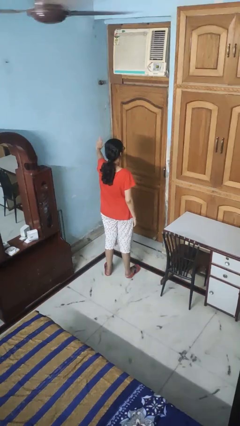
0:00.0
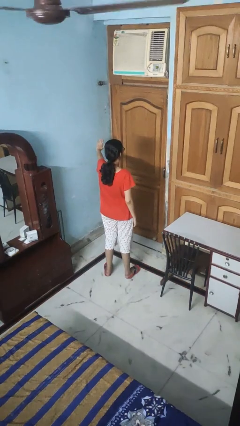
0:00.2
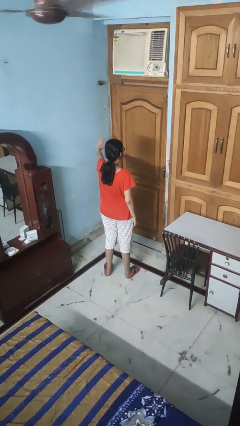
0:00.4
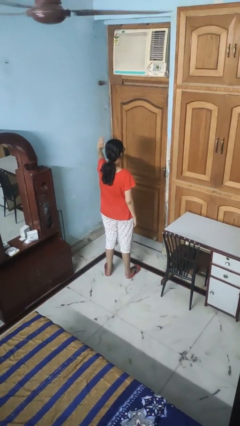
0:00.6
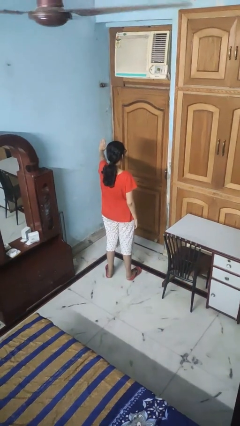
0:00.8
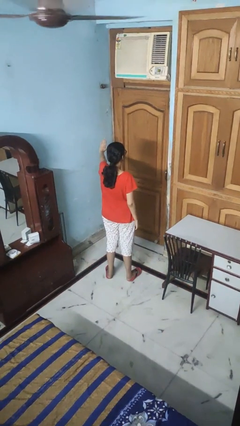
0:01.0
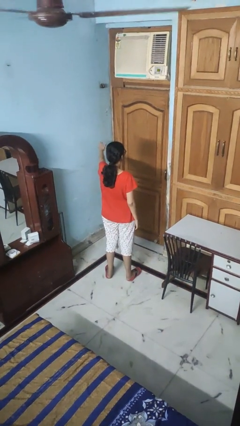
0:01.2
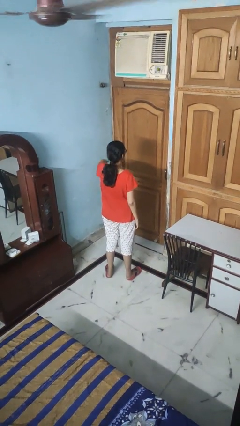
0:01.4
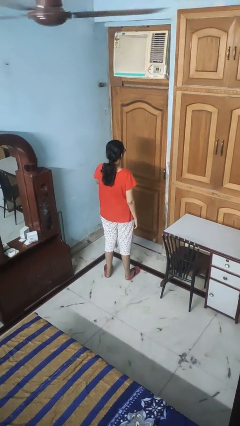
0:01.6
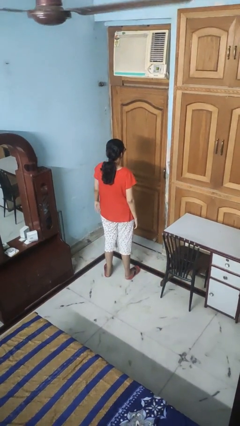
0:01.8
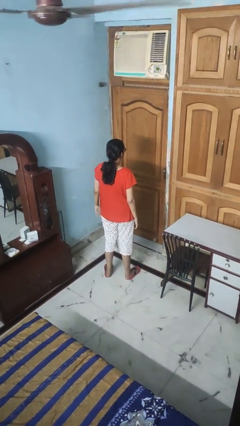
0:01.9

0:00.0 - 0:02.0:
person gestures stop

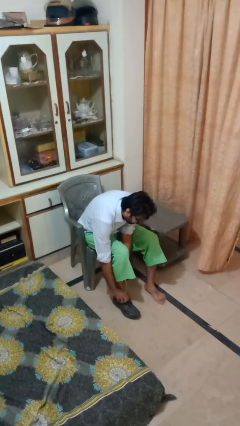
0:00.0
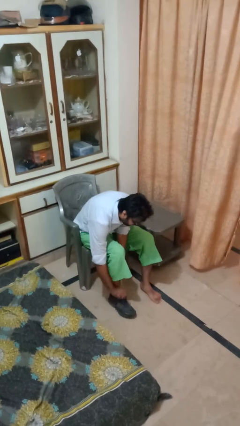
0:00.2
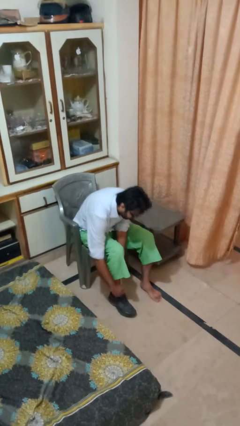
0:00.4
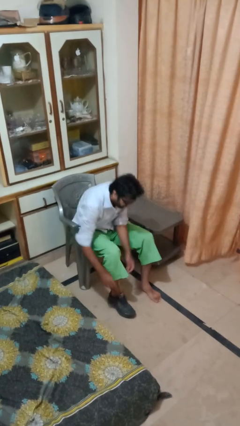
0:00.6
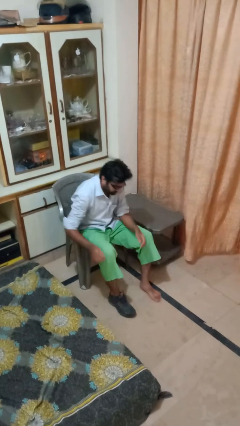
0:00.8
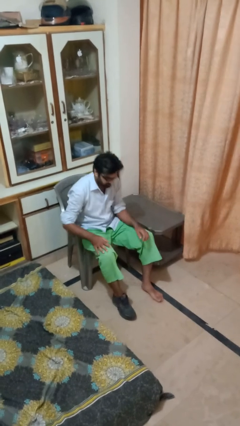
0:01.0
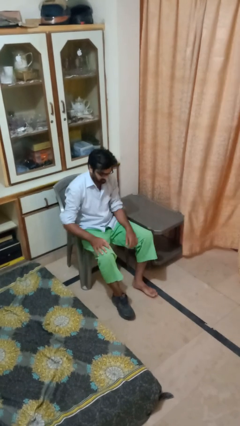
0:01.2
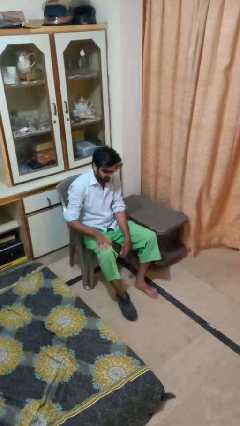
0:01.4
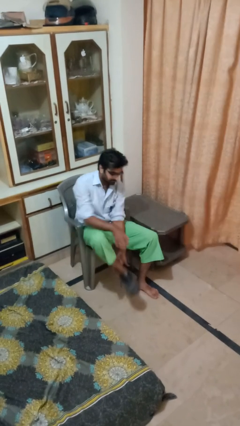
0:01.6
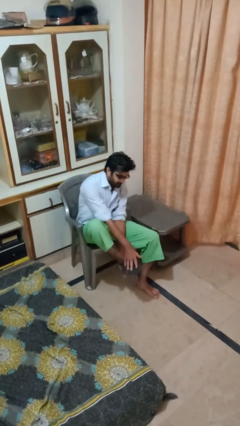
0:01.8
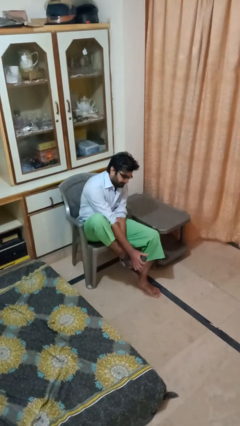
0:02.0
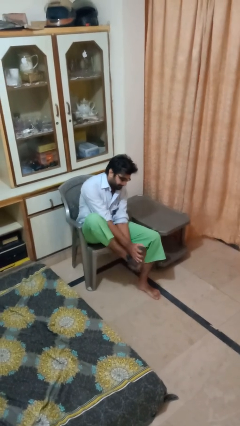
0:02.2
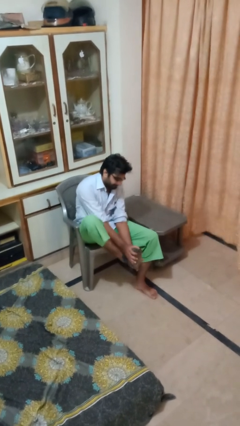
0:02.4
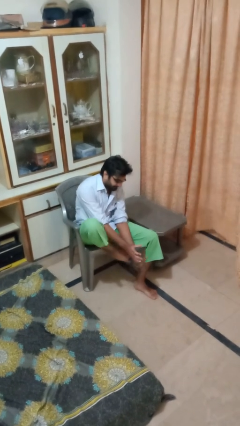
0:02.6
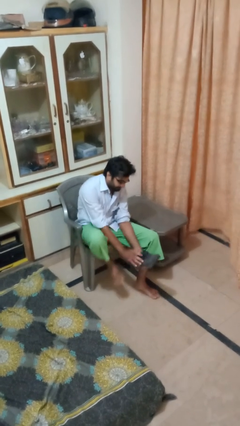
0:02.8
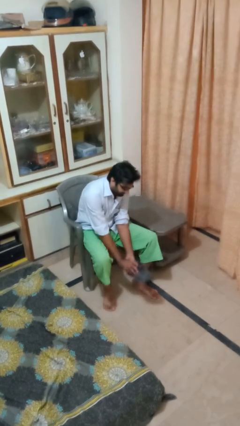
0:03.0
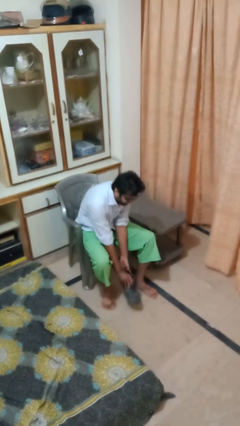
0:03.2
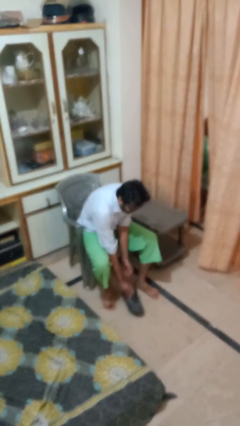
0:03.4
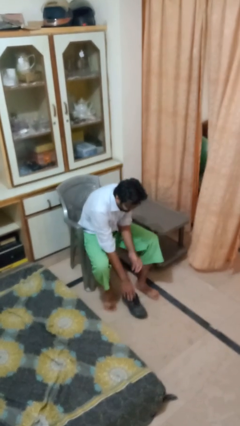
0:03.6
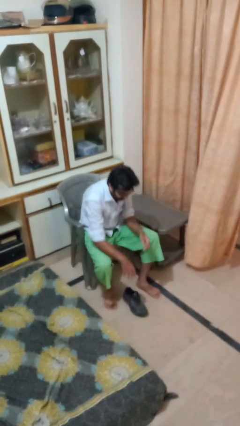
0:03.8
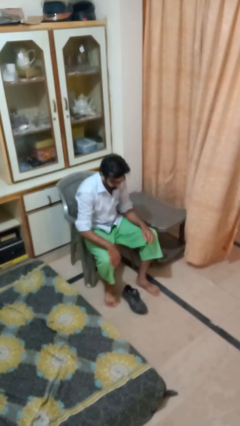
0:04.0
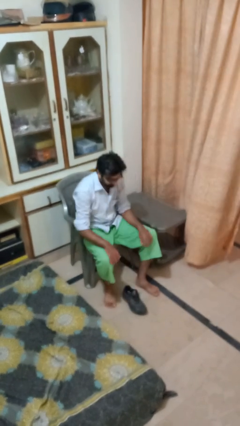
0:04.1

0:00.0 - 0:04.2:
person takes off boots

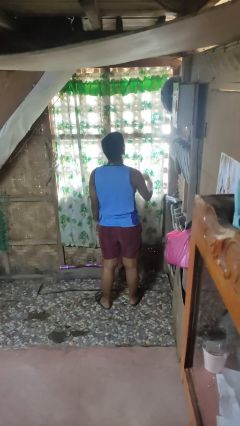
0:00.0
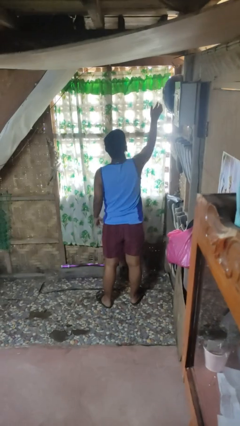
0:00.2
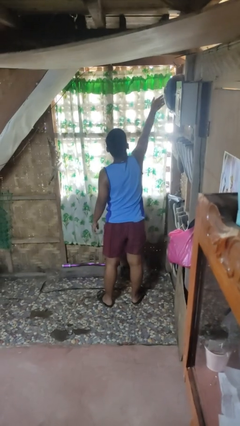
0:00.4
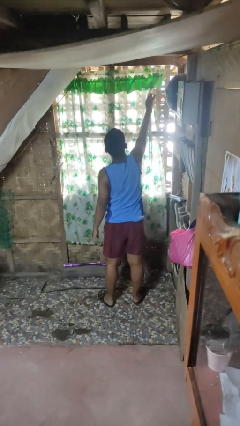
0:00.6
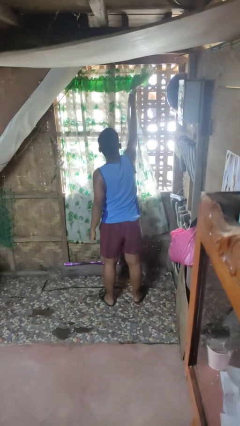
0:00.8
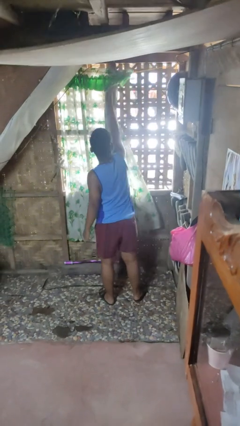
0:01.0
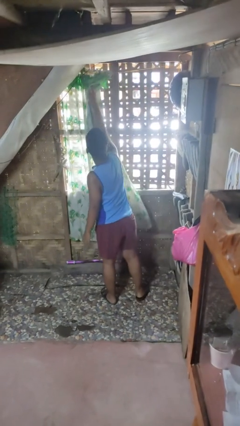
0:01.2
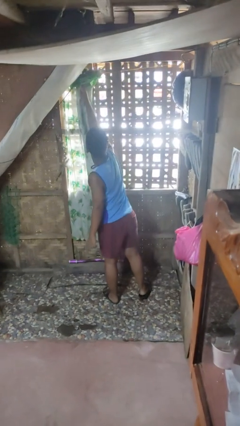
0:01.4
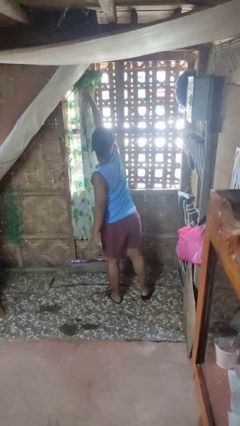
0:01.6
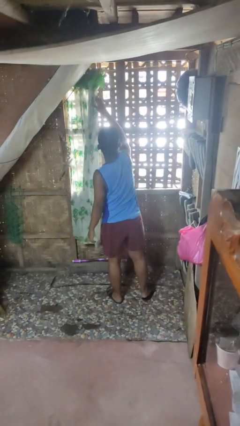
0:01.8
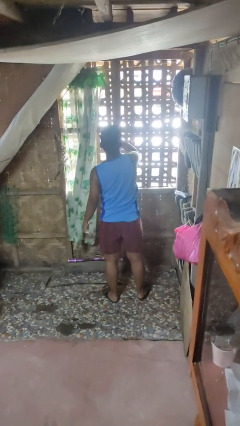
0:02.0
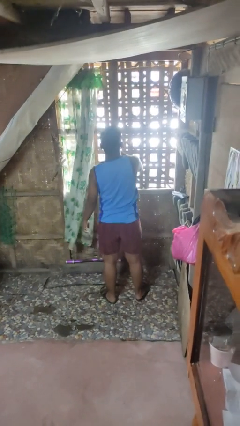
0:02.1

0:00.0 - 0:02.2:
person opens curtains

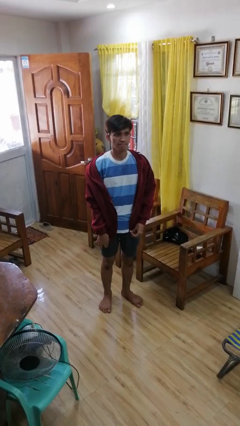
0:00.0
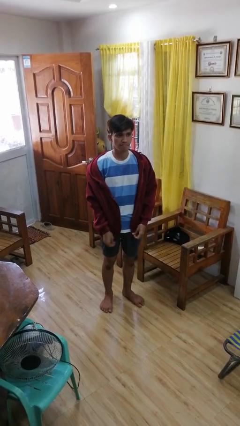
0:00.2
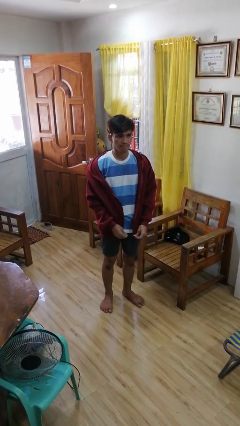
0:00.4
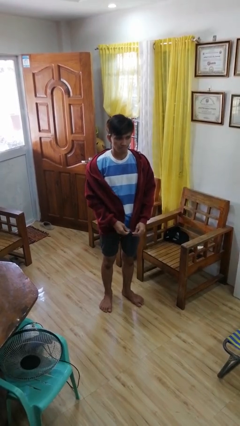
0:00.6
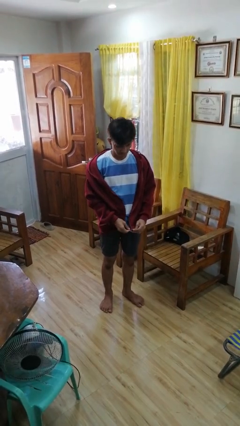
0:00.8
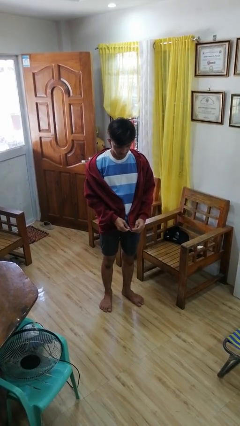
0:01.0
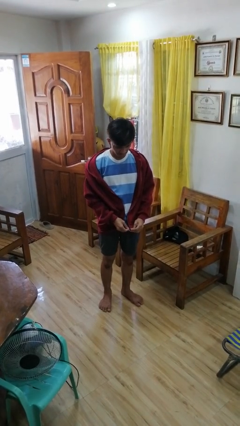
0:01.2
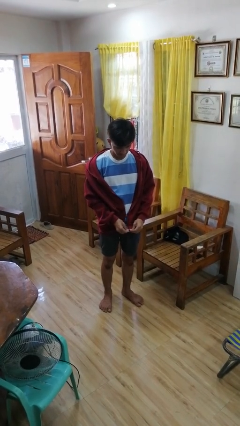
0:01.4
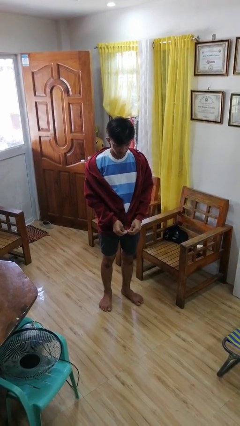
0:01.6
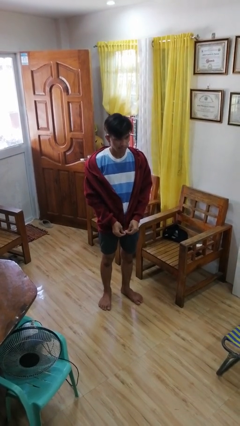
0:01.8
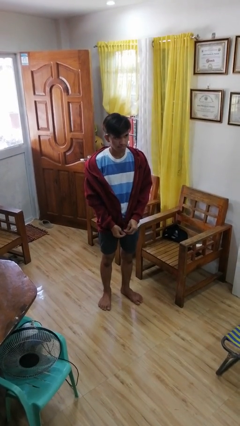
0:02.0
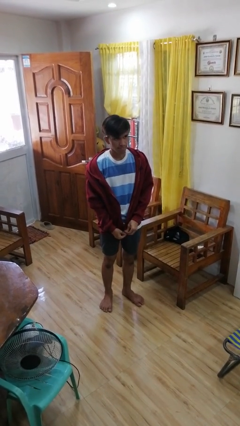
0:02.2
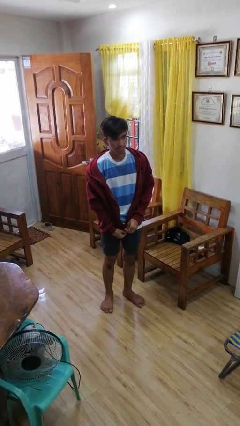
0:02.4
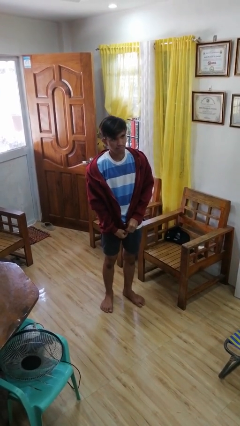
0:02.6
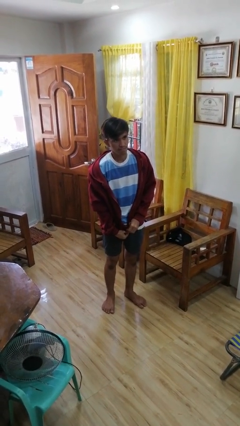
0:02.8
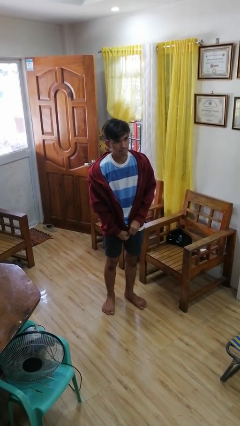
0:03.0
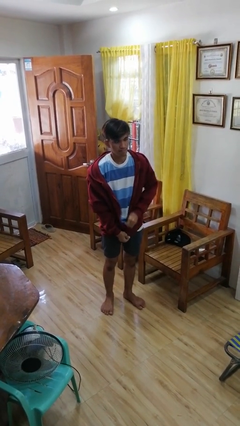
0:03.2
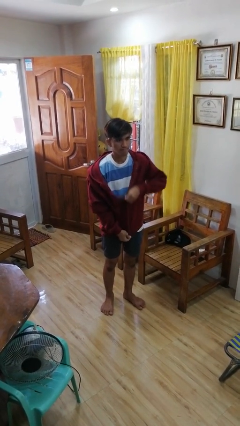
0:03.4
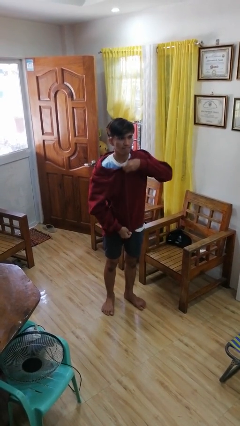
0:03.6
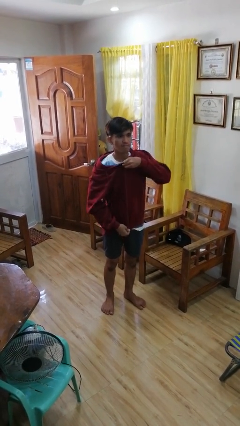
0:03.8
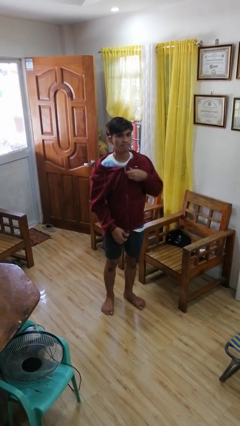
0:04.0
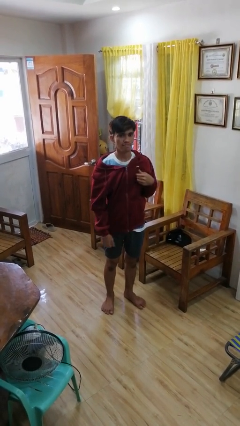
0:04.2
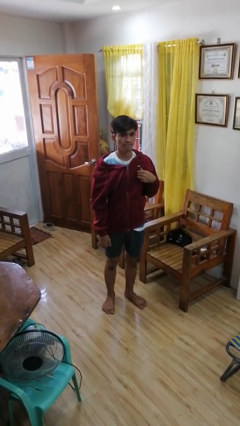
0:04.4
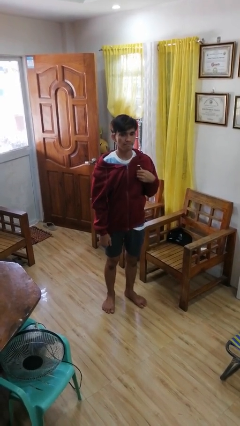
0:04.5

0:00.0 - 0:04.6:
person zips up jacket

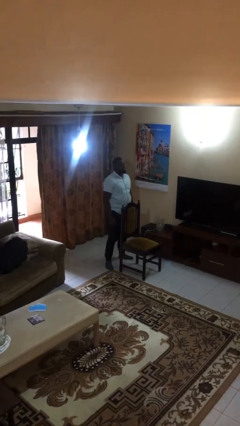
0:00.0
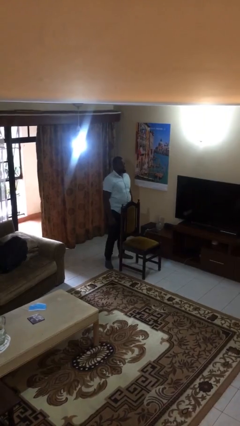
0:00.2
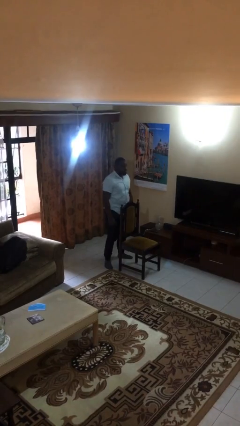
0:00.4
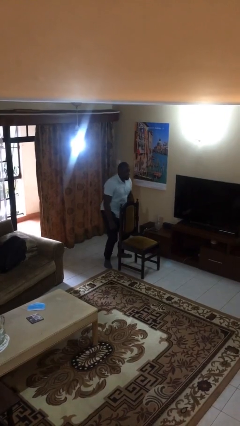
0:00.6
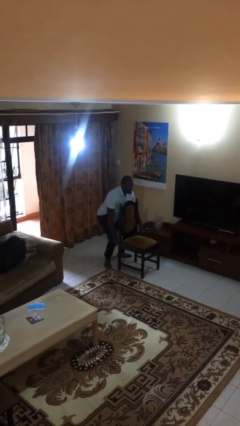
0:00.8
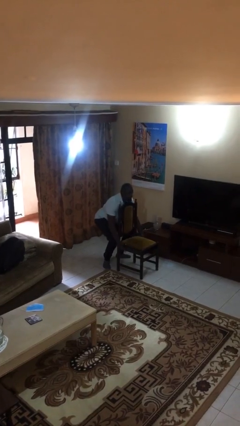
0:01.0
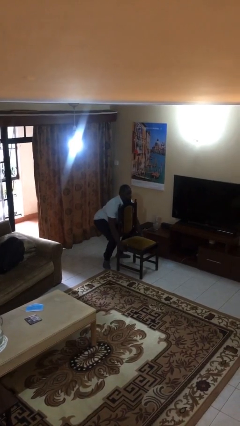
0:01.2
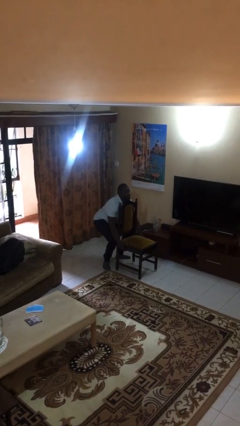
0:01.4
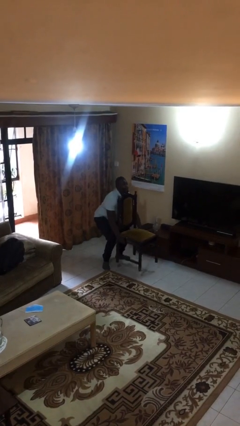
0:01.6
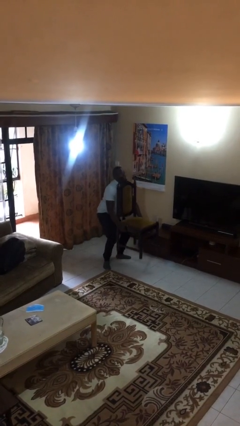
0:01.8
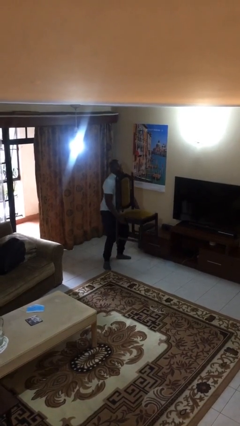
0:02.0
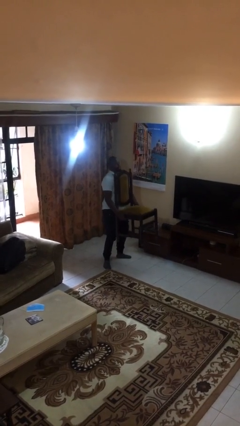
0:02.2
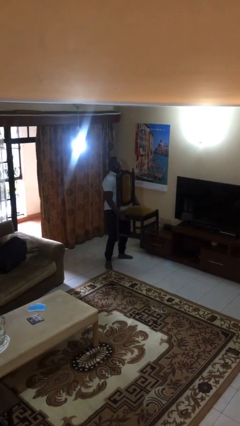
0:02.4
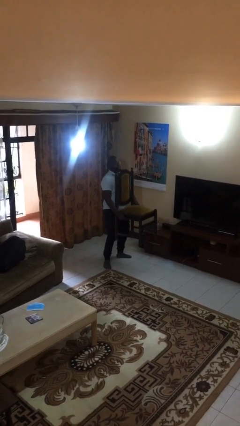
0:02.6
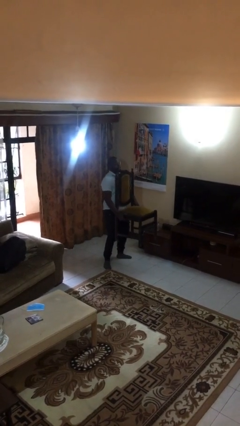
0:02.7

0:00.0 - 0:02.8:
person picks up object from floor

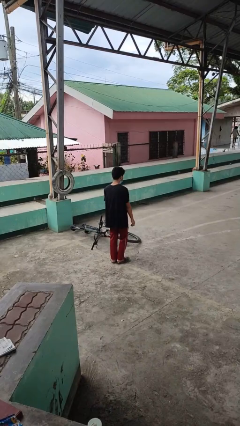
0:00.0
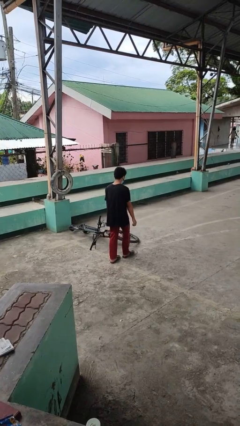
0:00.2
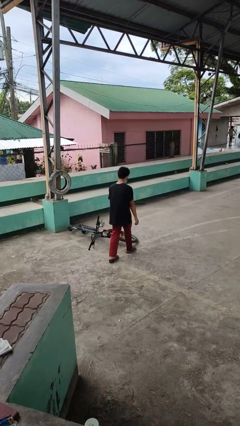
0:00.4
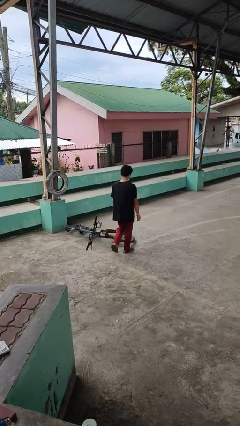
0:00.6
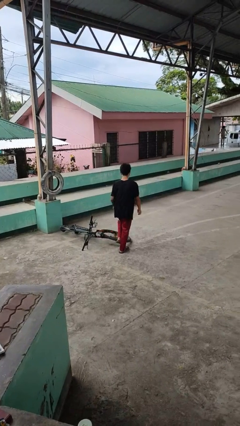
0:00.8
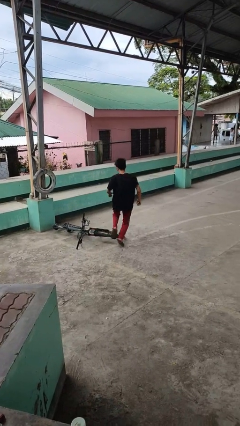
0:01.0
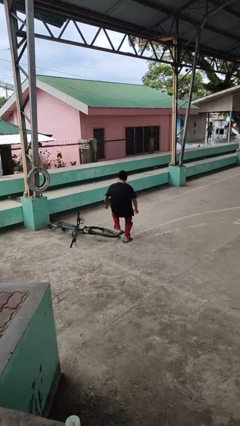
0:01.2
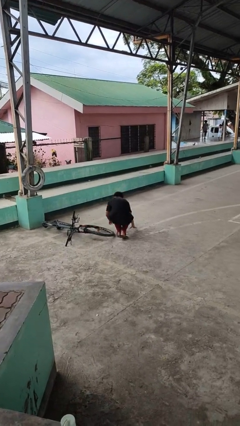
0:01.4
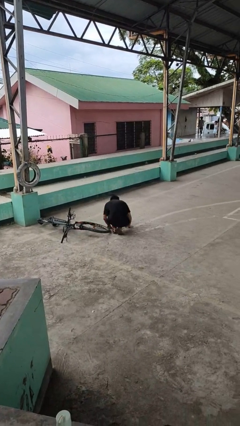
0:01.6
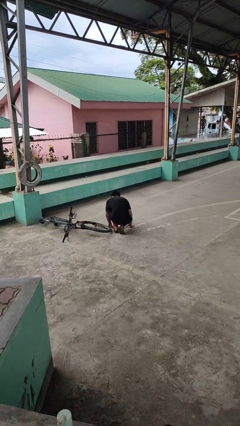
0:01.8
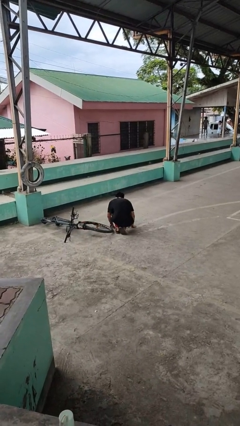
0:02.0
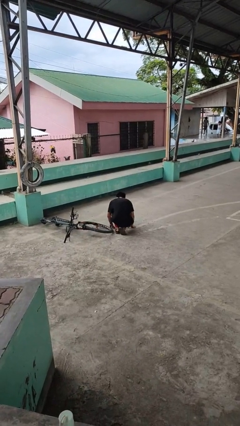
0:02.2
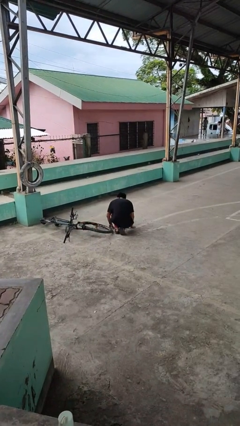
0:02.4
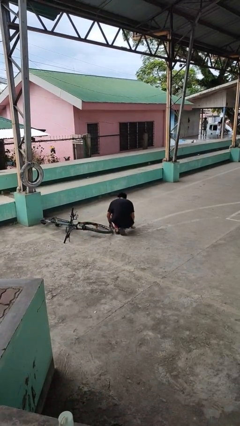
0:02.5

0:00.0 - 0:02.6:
person drops object
